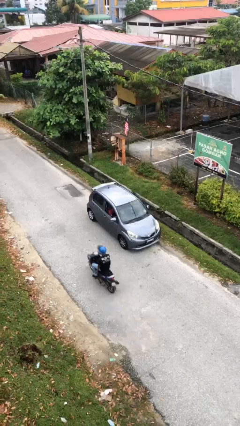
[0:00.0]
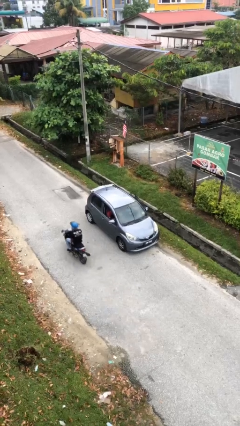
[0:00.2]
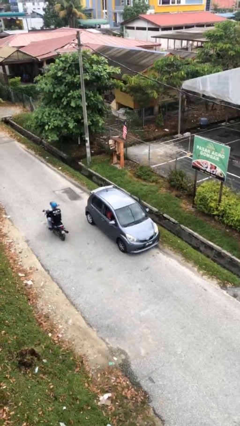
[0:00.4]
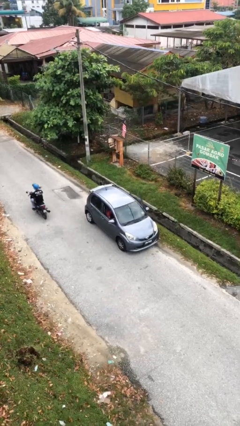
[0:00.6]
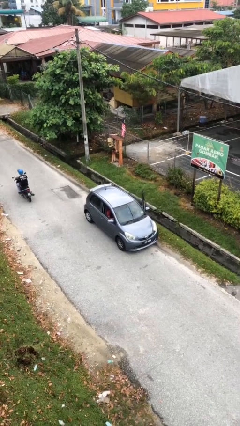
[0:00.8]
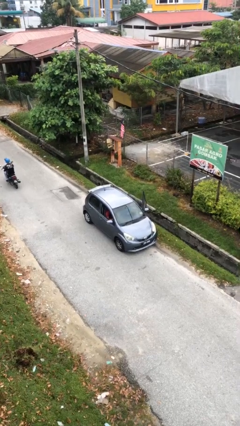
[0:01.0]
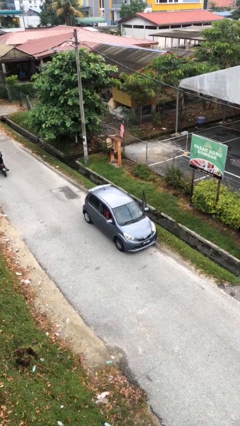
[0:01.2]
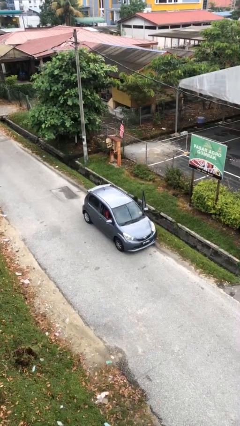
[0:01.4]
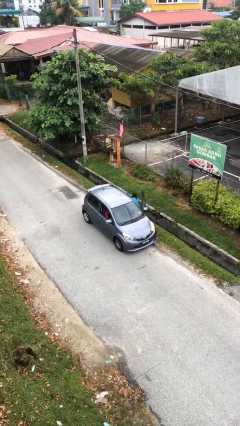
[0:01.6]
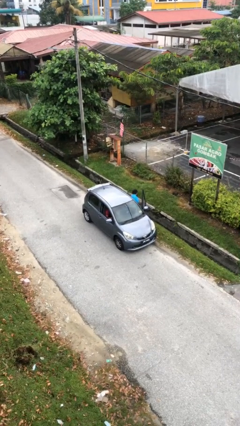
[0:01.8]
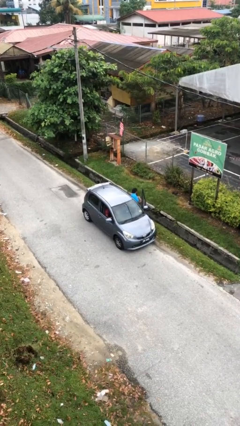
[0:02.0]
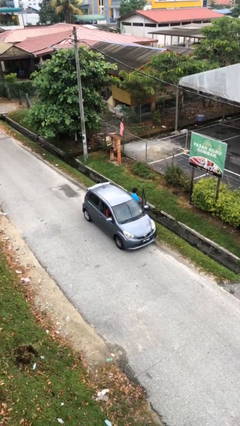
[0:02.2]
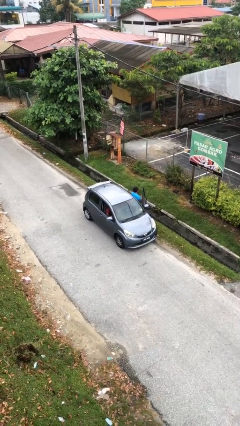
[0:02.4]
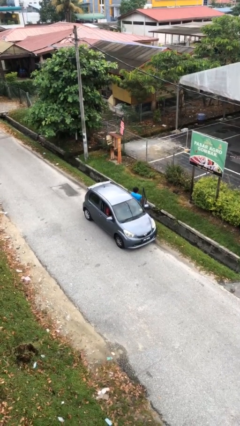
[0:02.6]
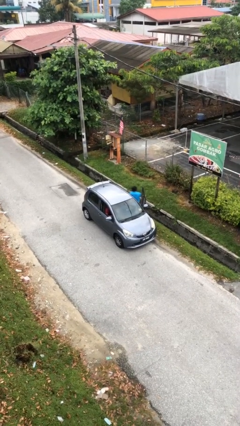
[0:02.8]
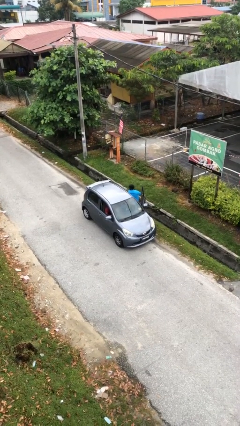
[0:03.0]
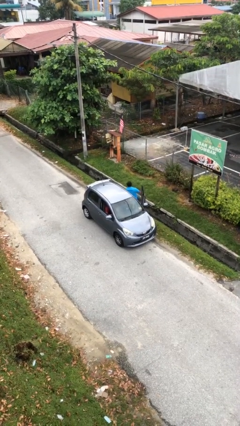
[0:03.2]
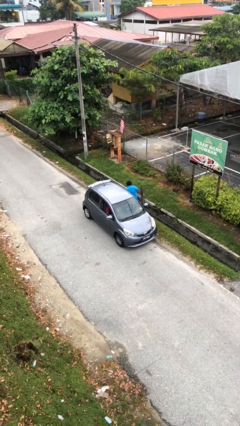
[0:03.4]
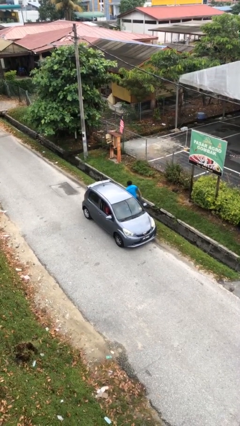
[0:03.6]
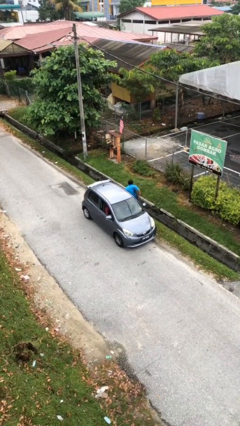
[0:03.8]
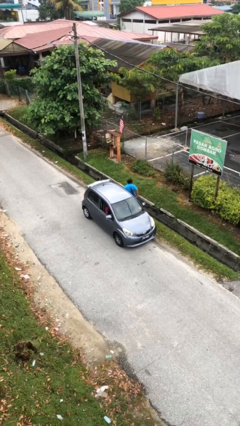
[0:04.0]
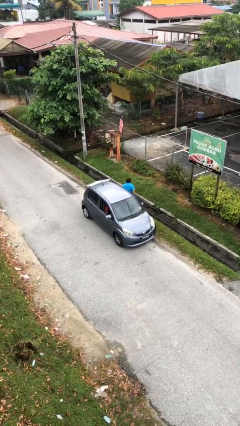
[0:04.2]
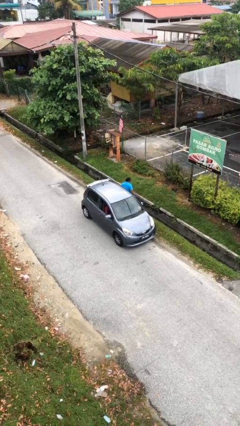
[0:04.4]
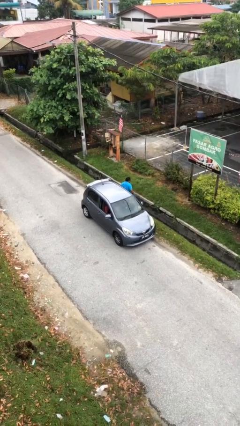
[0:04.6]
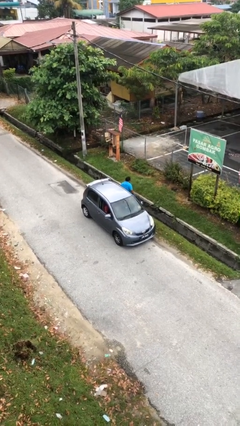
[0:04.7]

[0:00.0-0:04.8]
car drops off person

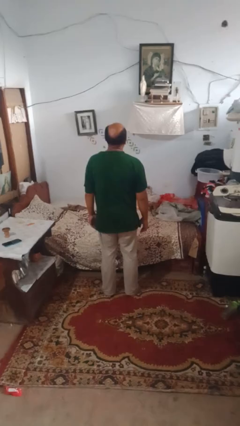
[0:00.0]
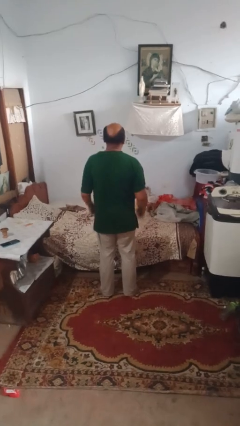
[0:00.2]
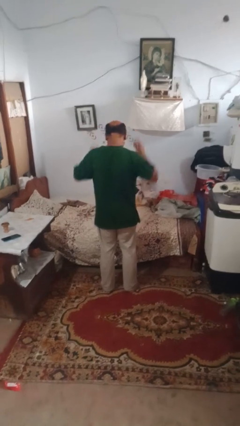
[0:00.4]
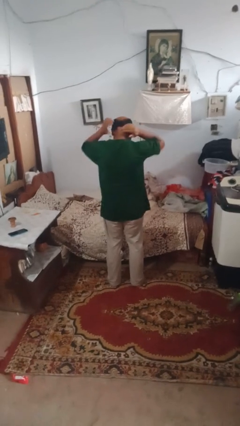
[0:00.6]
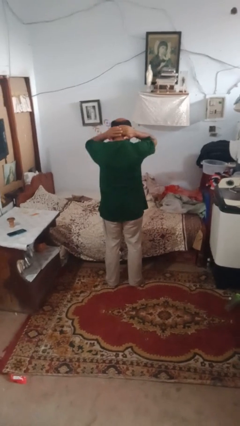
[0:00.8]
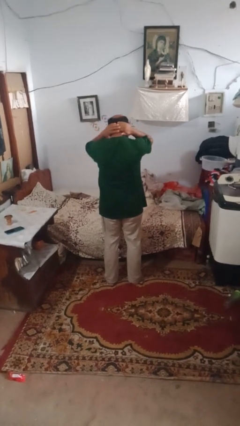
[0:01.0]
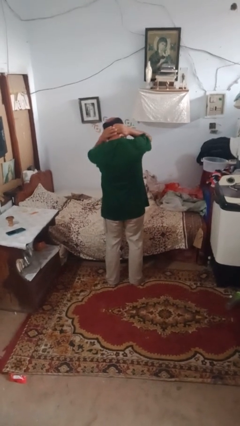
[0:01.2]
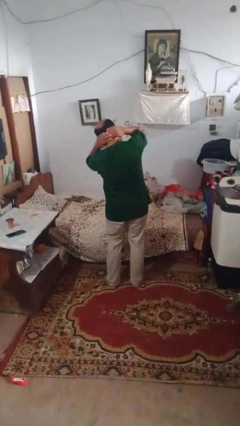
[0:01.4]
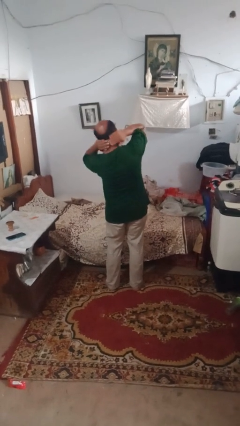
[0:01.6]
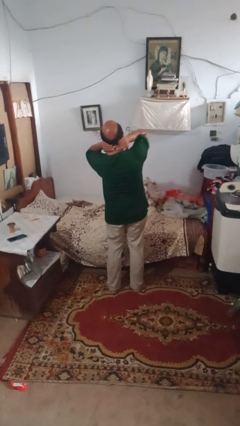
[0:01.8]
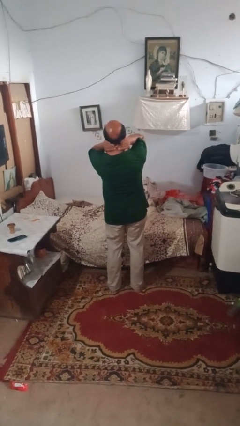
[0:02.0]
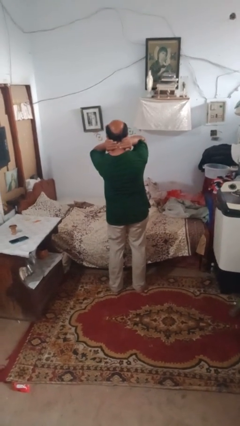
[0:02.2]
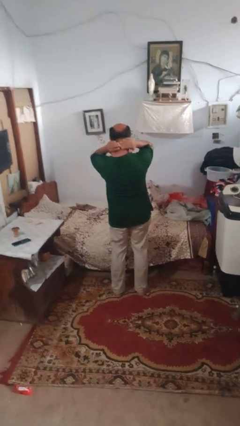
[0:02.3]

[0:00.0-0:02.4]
person rubs neck

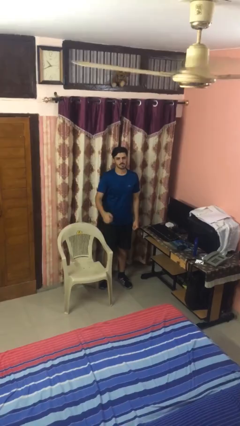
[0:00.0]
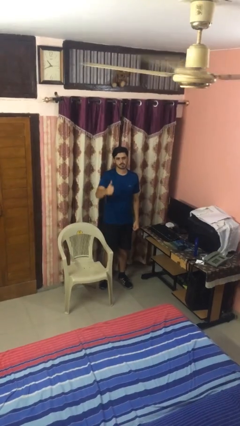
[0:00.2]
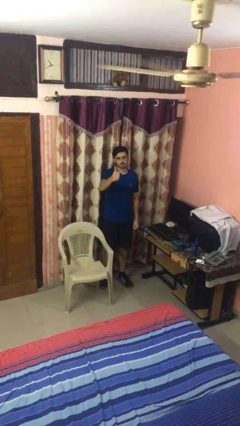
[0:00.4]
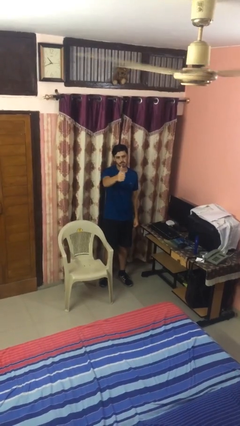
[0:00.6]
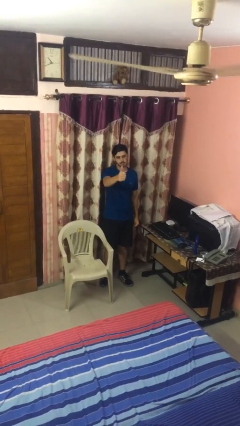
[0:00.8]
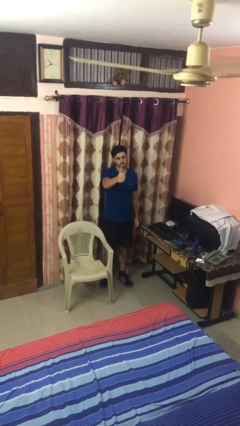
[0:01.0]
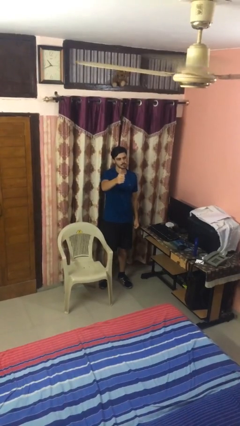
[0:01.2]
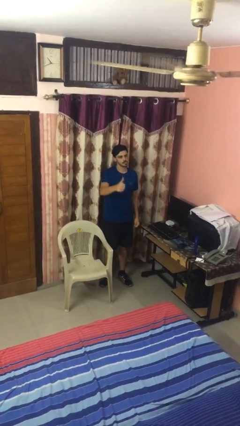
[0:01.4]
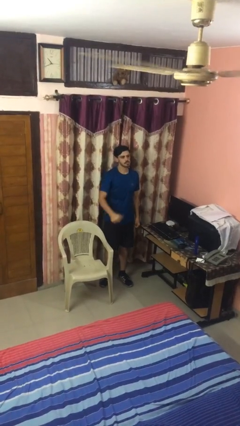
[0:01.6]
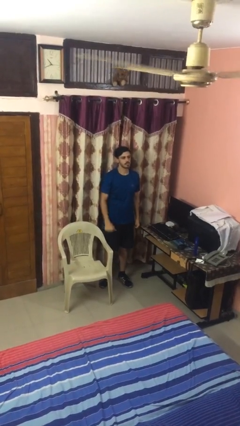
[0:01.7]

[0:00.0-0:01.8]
person gestures thumbs up

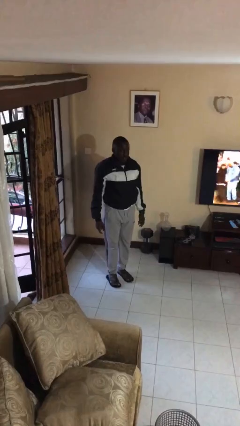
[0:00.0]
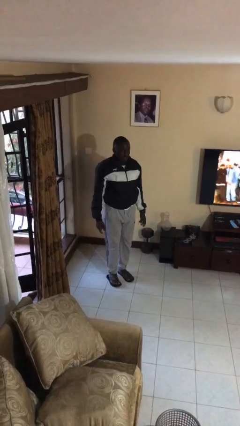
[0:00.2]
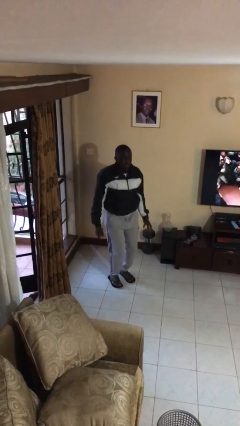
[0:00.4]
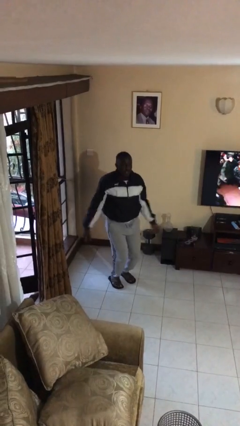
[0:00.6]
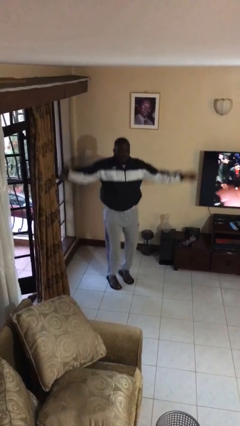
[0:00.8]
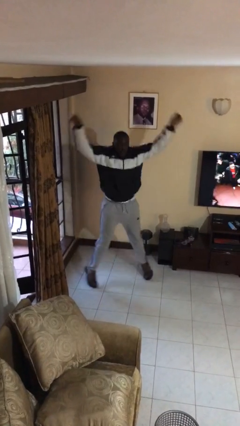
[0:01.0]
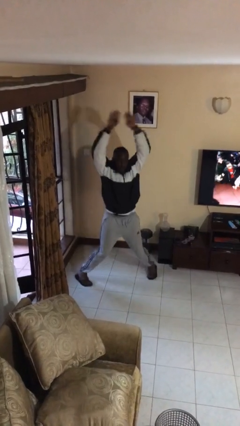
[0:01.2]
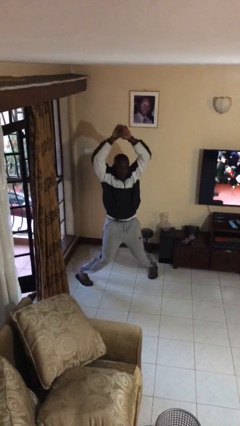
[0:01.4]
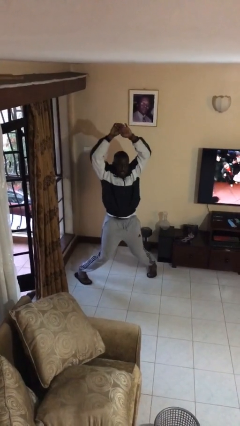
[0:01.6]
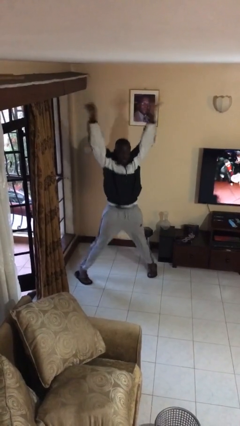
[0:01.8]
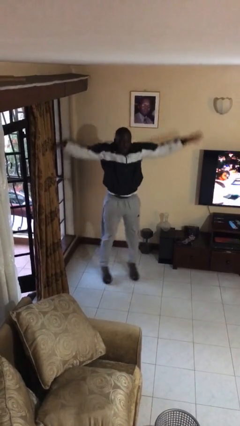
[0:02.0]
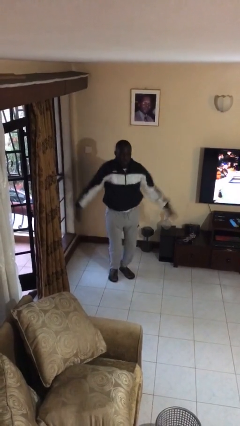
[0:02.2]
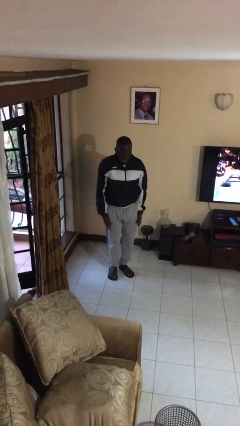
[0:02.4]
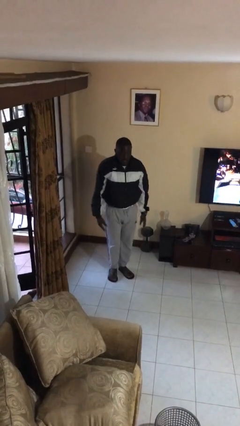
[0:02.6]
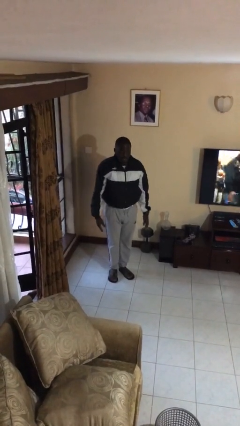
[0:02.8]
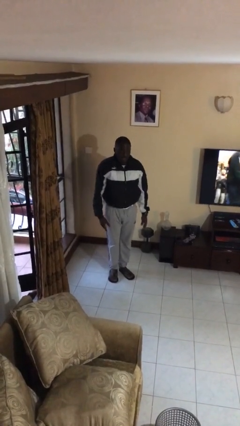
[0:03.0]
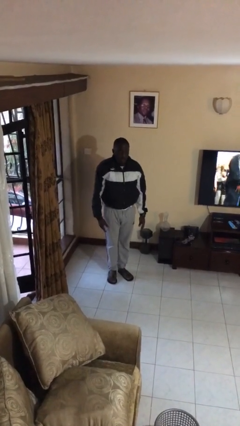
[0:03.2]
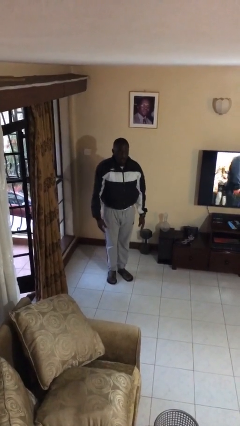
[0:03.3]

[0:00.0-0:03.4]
person exercises with jumping jacks

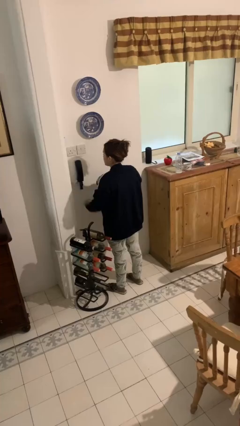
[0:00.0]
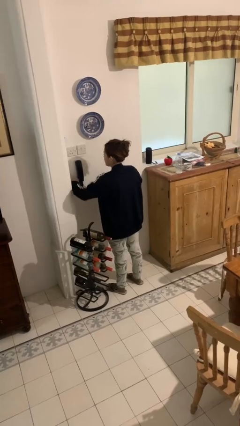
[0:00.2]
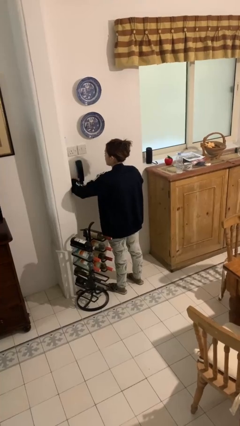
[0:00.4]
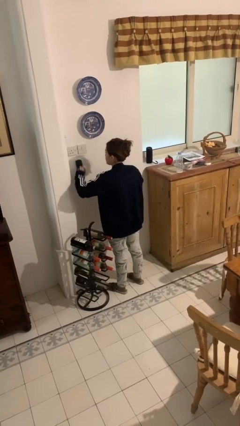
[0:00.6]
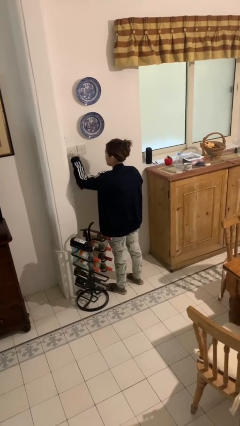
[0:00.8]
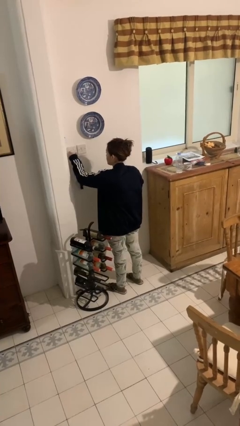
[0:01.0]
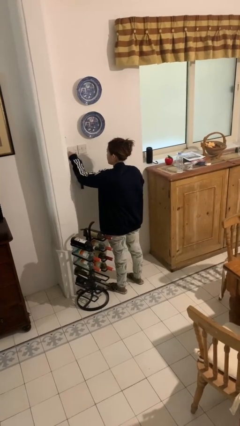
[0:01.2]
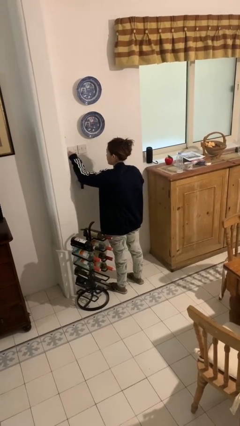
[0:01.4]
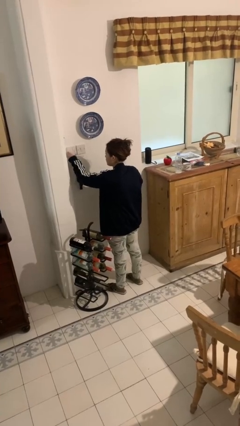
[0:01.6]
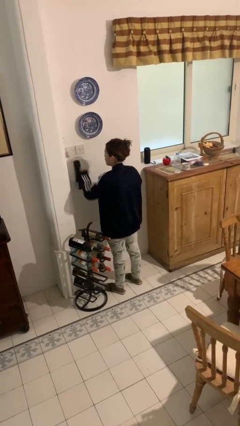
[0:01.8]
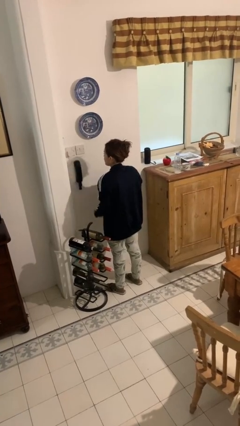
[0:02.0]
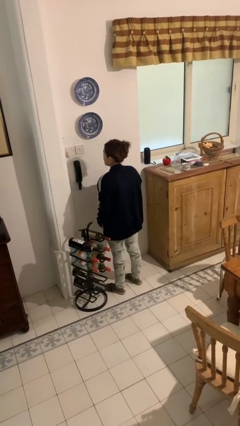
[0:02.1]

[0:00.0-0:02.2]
person plugs into electrical socket

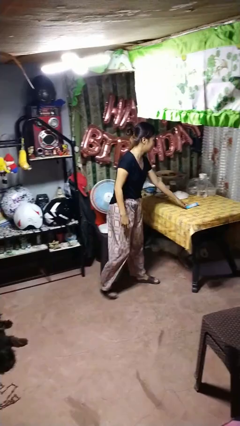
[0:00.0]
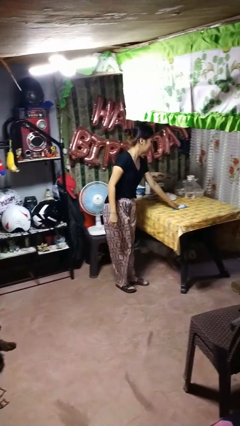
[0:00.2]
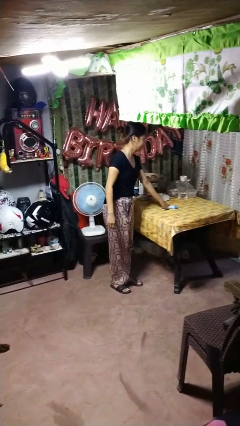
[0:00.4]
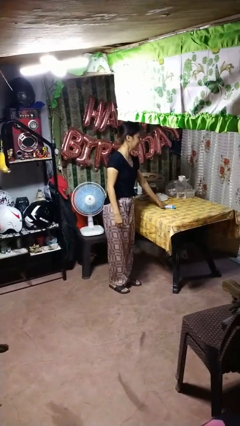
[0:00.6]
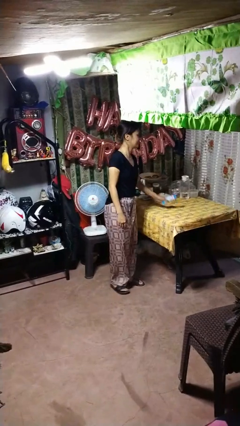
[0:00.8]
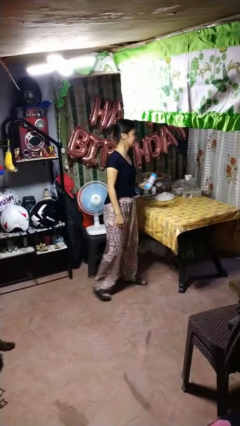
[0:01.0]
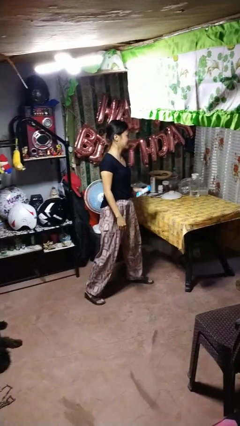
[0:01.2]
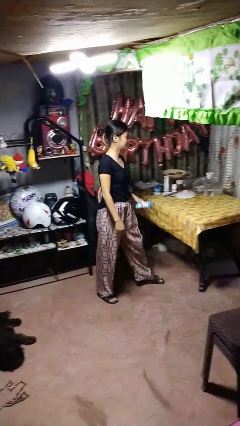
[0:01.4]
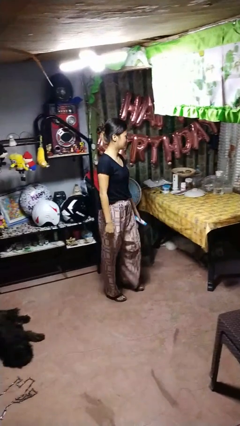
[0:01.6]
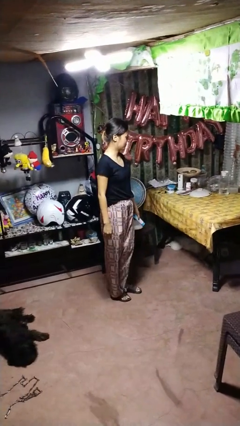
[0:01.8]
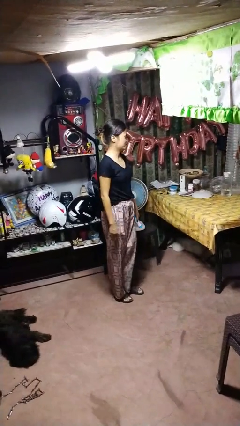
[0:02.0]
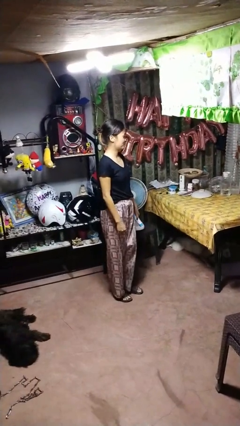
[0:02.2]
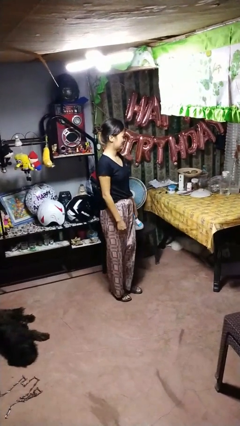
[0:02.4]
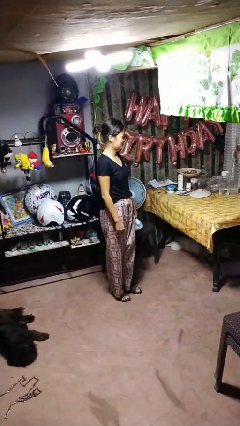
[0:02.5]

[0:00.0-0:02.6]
person picks up object from table
